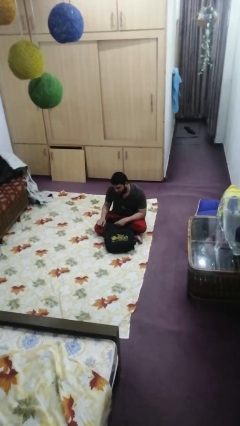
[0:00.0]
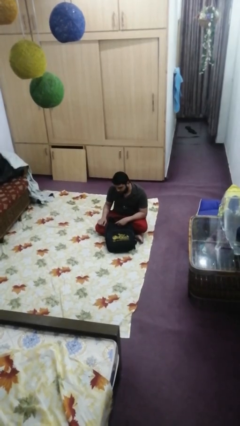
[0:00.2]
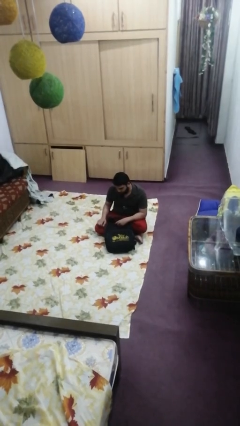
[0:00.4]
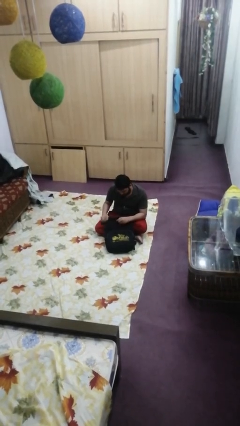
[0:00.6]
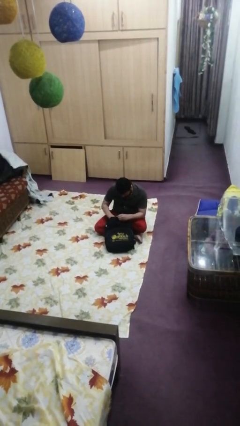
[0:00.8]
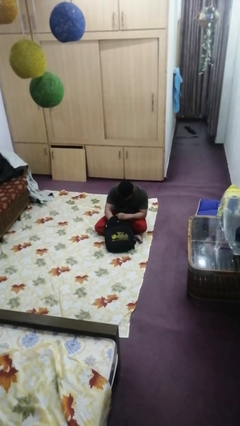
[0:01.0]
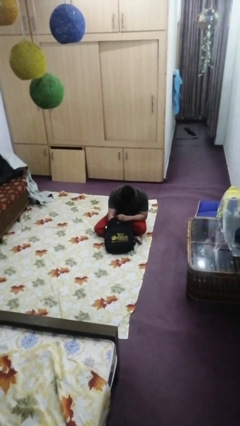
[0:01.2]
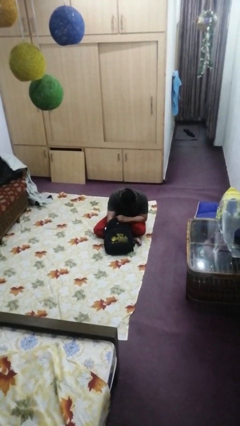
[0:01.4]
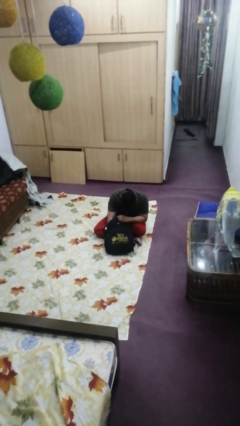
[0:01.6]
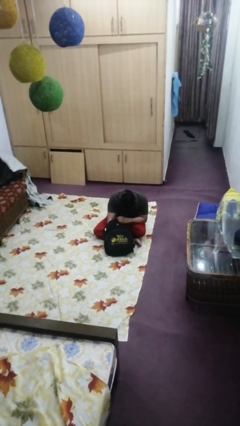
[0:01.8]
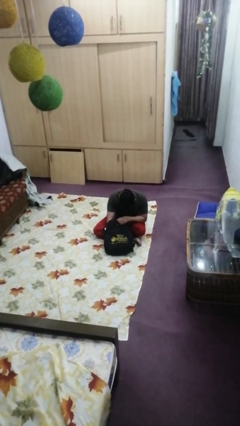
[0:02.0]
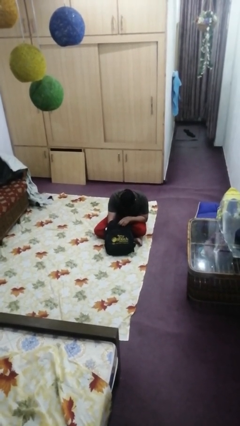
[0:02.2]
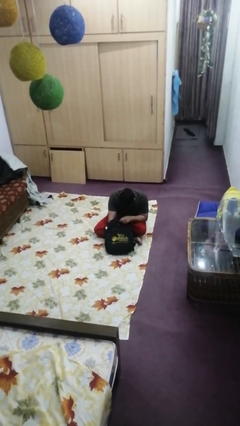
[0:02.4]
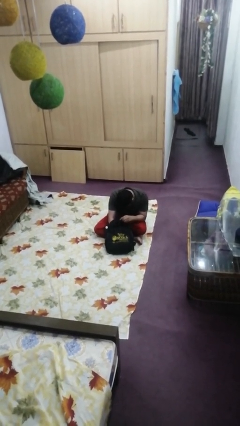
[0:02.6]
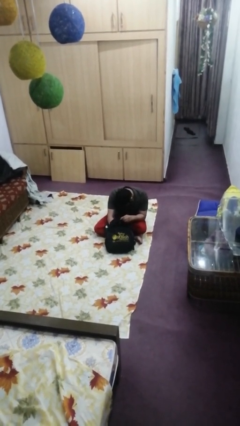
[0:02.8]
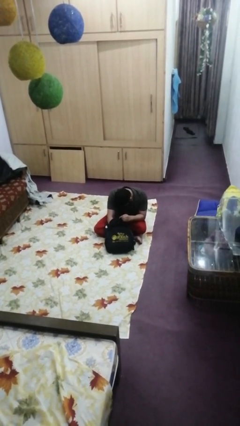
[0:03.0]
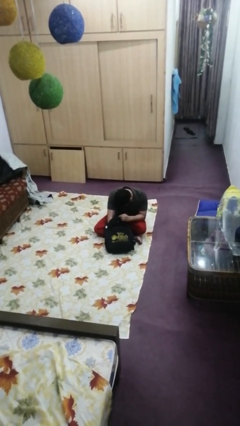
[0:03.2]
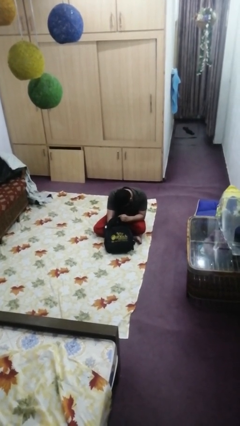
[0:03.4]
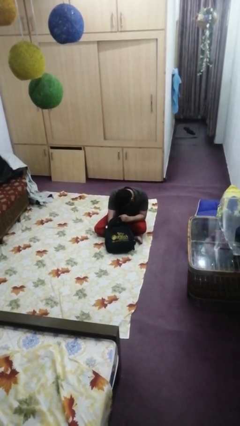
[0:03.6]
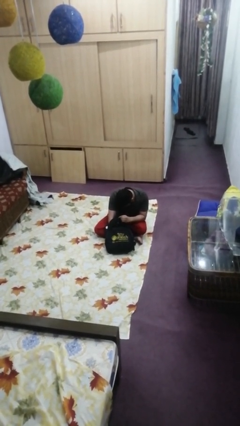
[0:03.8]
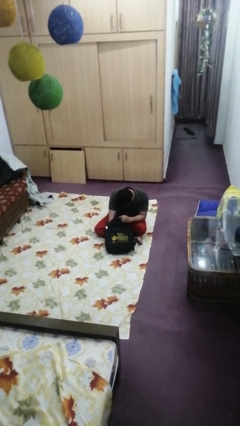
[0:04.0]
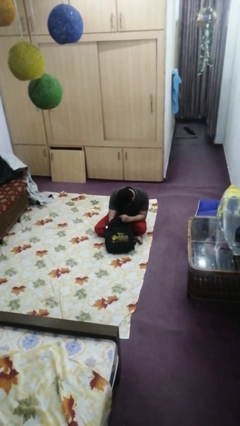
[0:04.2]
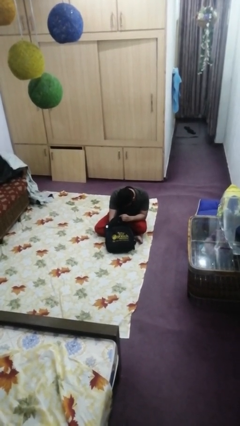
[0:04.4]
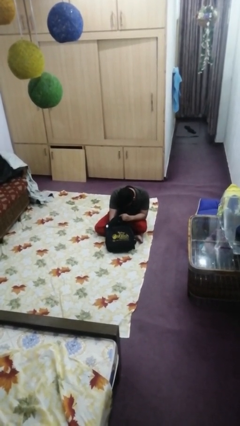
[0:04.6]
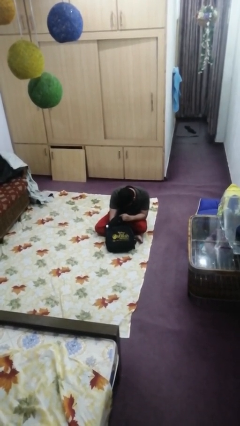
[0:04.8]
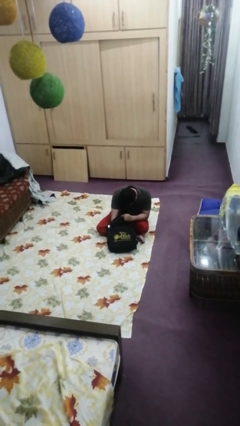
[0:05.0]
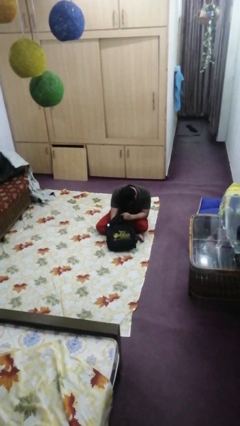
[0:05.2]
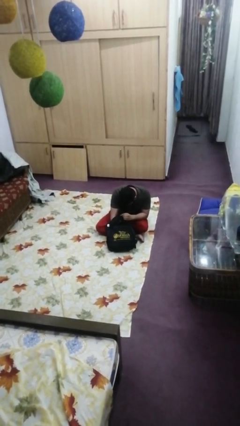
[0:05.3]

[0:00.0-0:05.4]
person searches in backpack

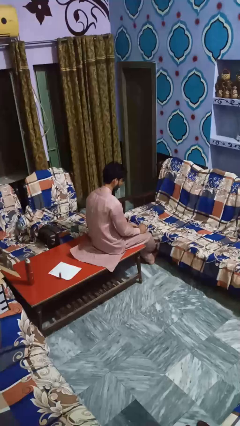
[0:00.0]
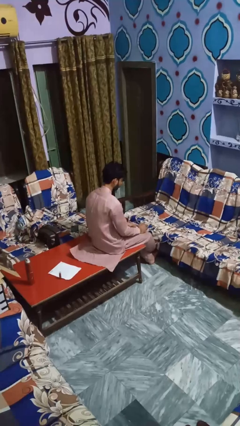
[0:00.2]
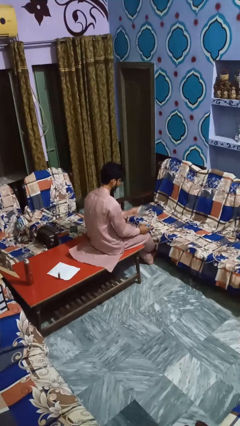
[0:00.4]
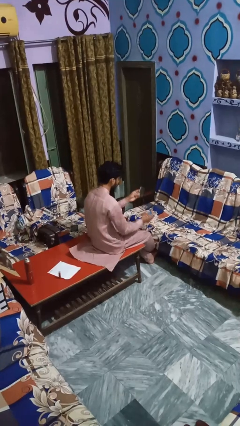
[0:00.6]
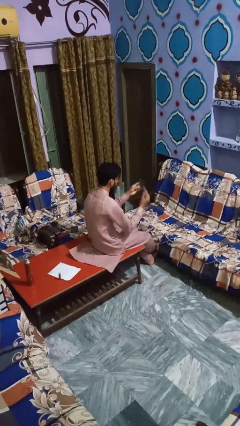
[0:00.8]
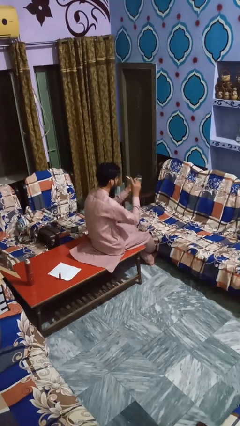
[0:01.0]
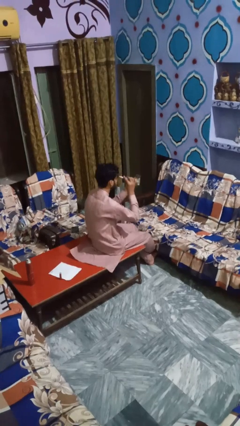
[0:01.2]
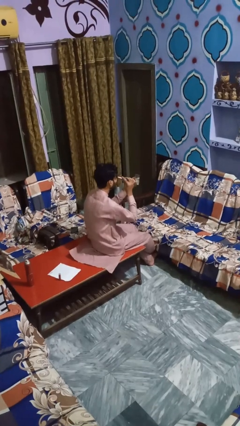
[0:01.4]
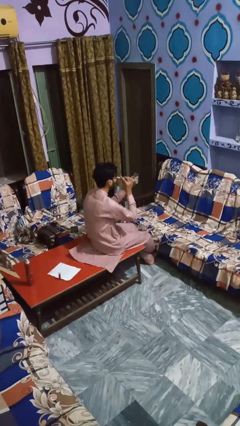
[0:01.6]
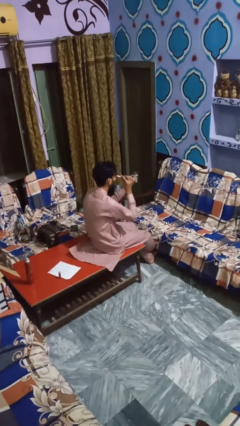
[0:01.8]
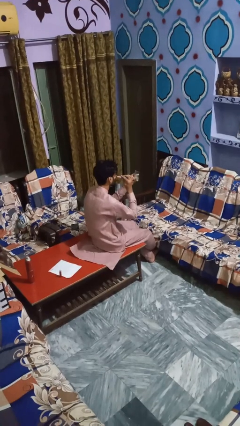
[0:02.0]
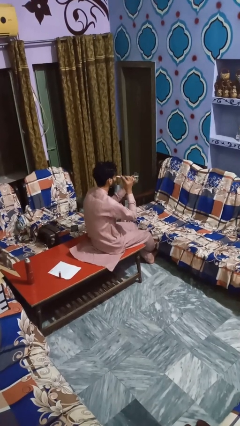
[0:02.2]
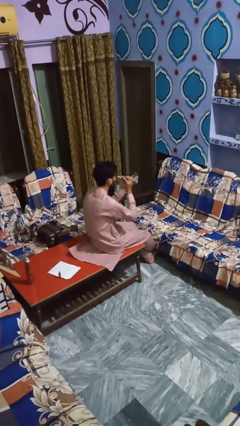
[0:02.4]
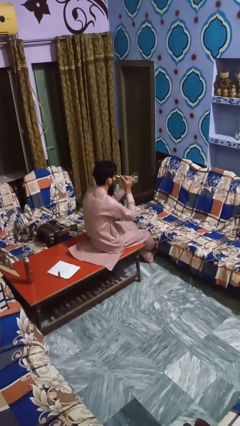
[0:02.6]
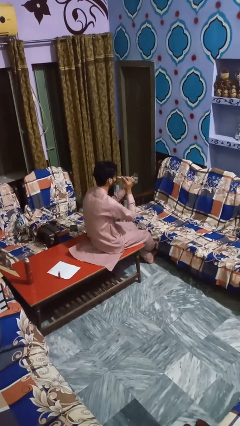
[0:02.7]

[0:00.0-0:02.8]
person applies eye makeup

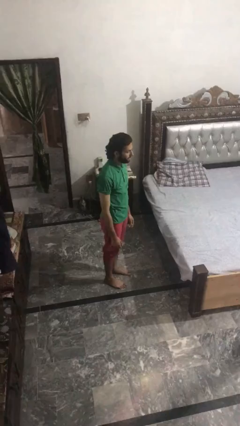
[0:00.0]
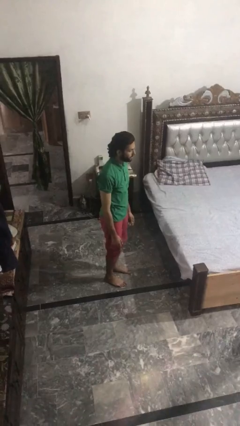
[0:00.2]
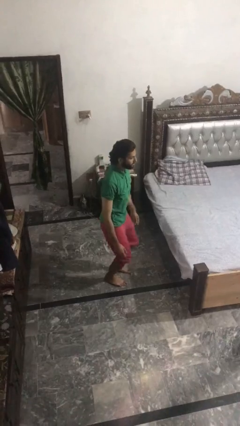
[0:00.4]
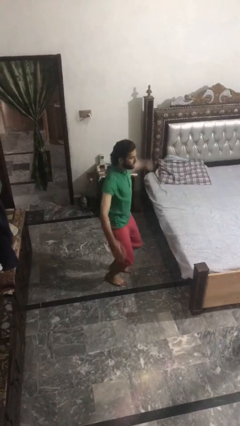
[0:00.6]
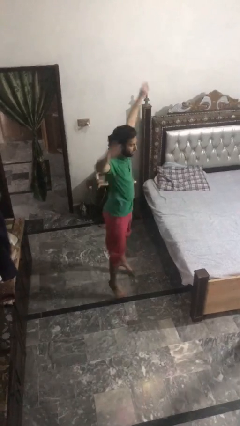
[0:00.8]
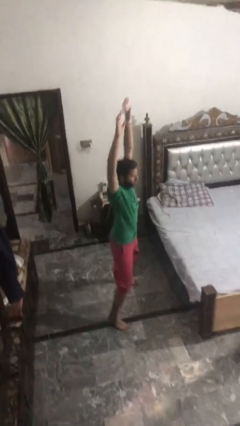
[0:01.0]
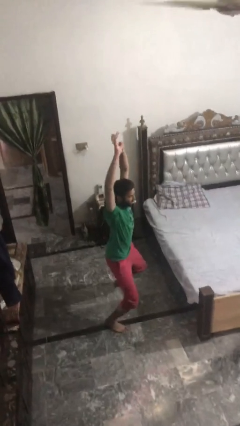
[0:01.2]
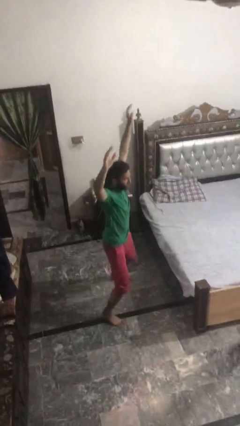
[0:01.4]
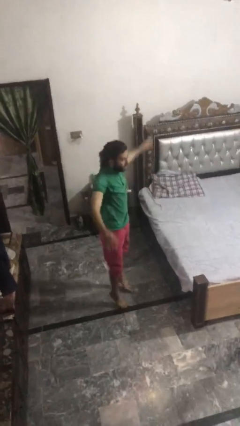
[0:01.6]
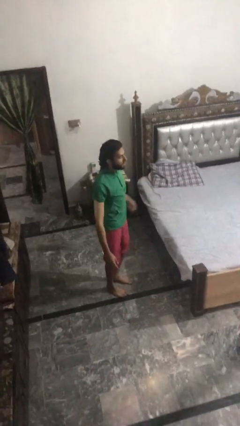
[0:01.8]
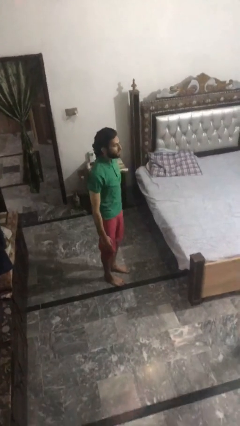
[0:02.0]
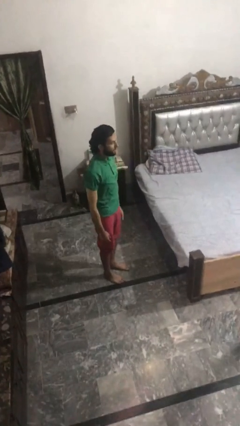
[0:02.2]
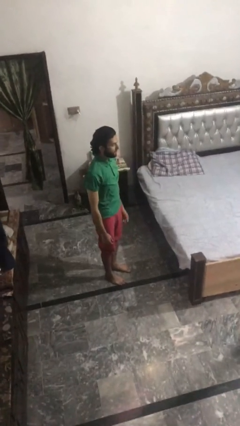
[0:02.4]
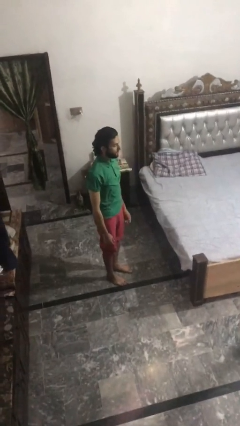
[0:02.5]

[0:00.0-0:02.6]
person exercises with jumping jacks

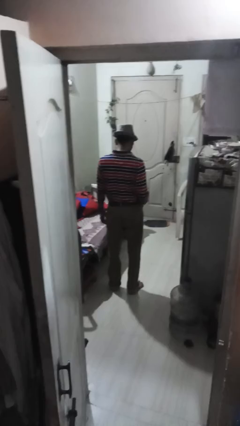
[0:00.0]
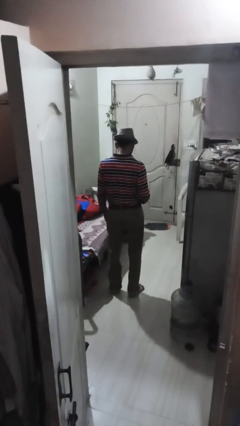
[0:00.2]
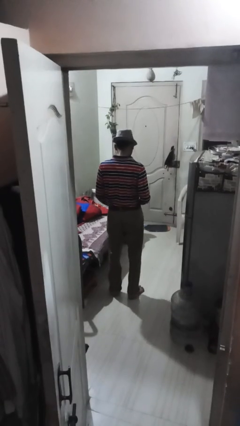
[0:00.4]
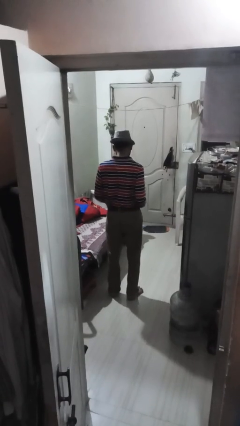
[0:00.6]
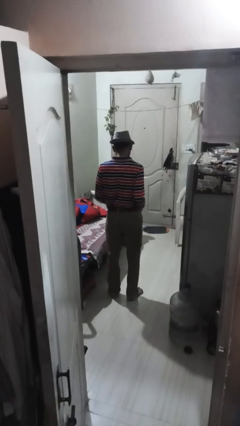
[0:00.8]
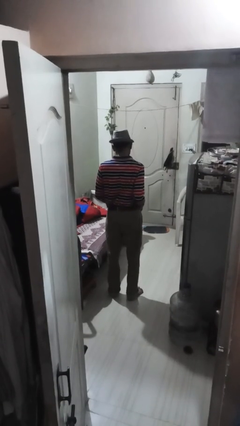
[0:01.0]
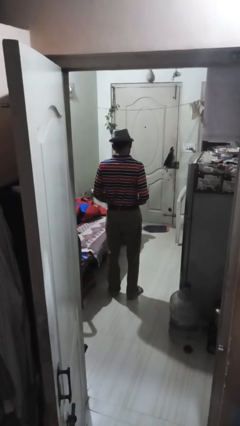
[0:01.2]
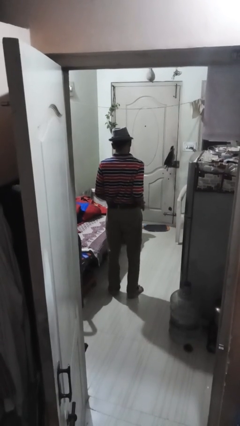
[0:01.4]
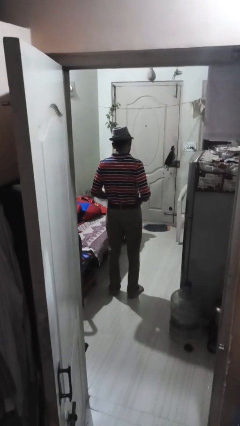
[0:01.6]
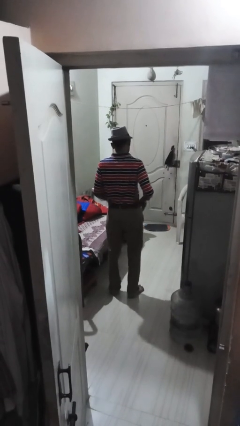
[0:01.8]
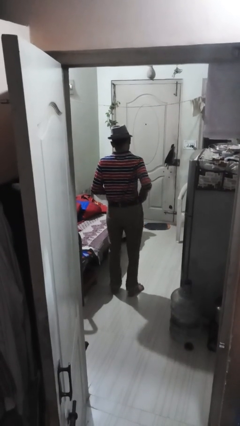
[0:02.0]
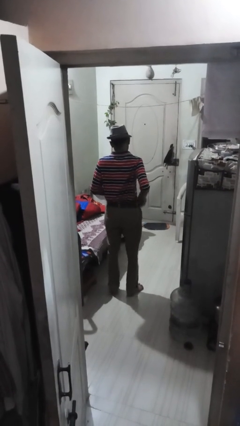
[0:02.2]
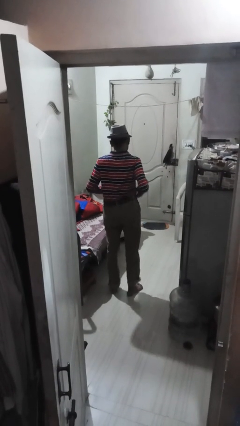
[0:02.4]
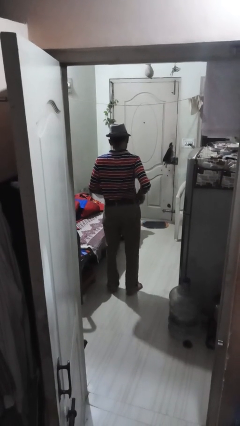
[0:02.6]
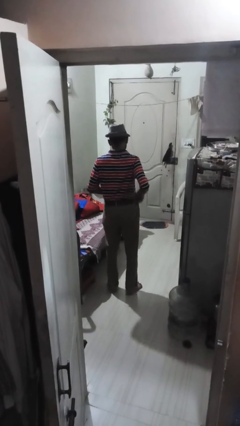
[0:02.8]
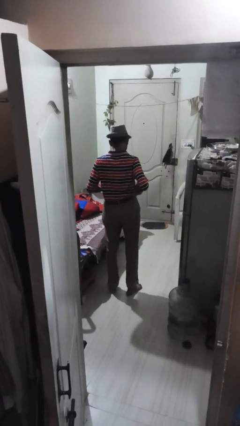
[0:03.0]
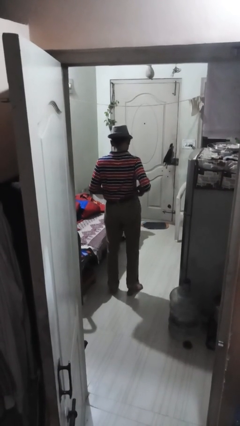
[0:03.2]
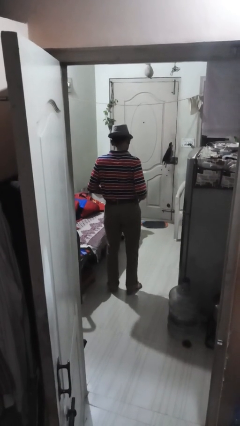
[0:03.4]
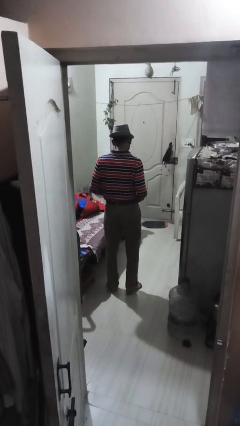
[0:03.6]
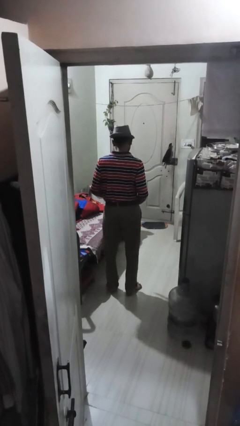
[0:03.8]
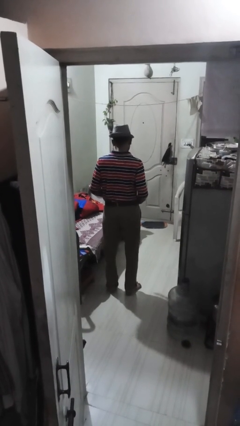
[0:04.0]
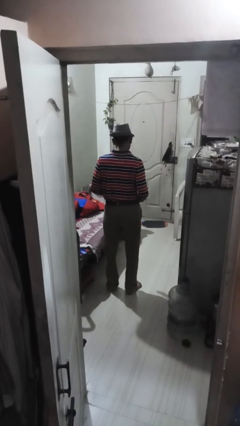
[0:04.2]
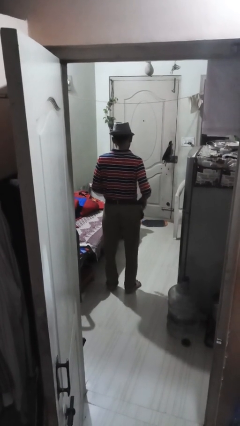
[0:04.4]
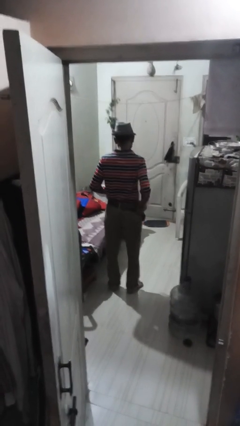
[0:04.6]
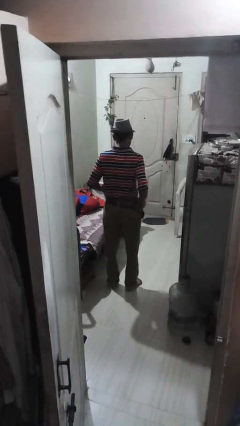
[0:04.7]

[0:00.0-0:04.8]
person hikes up pants

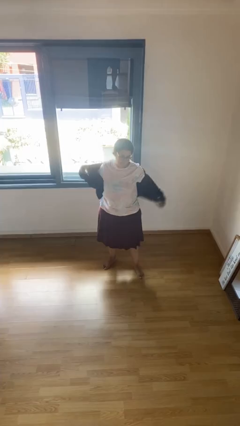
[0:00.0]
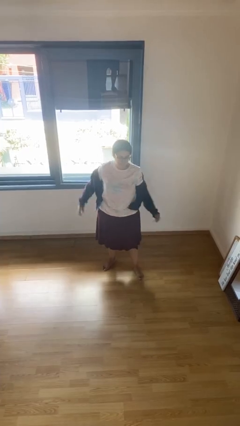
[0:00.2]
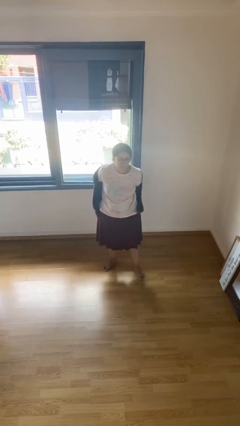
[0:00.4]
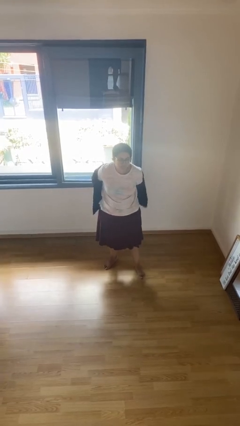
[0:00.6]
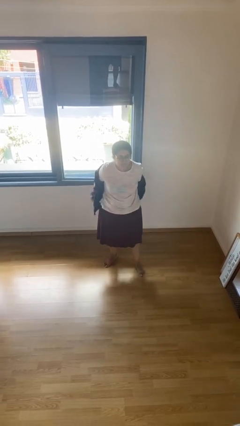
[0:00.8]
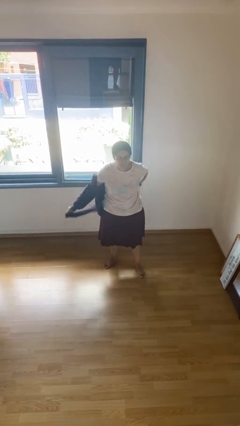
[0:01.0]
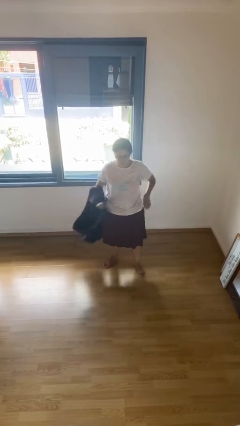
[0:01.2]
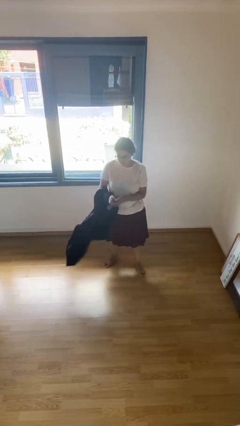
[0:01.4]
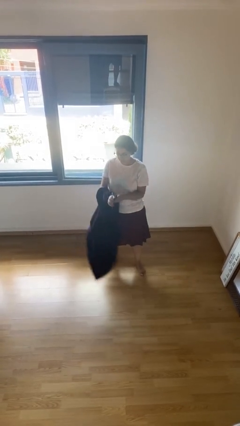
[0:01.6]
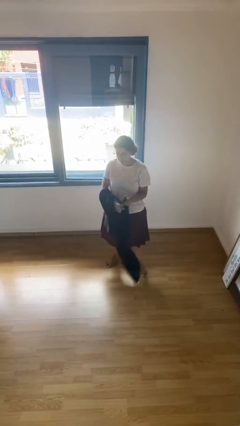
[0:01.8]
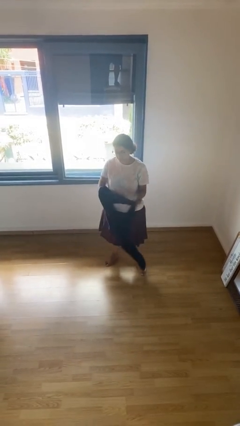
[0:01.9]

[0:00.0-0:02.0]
person takes off jacket

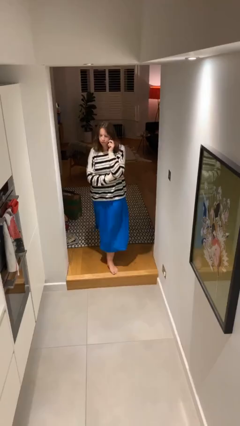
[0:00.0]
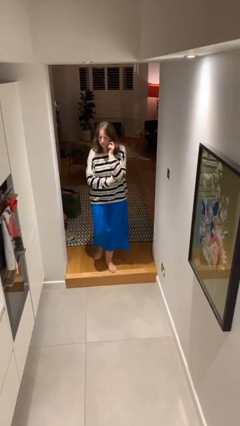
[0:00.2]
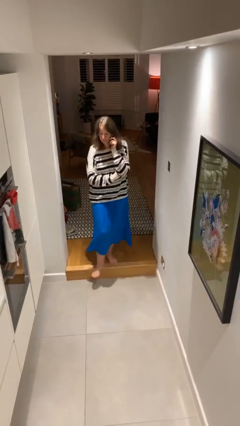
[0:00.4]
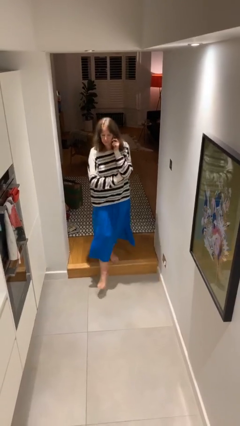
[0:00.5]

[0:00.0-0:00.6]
person enters scene through structure
